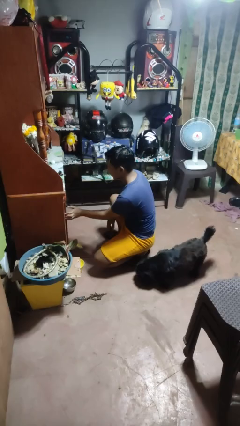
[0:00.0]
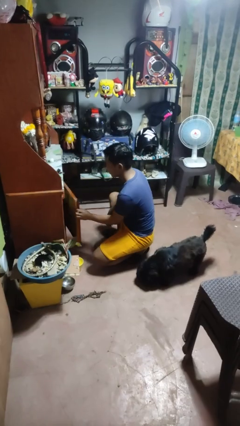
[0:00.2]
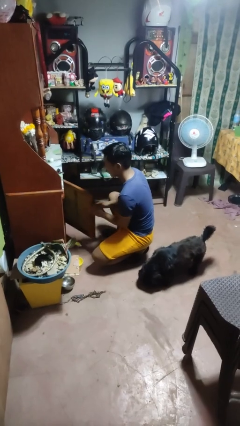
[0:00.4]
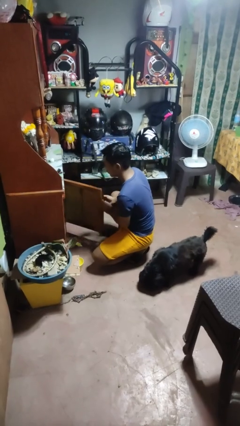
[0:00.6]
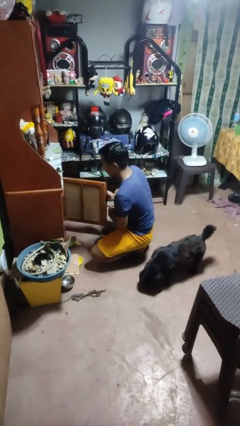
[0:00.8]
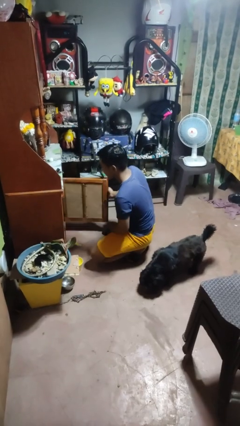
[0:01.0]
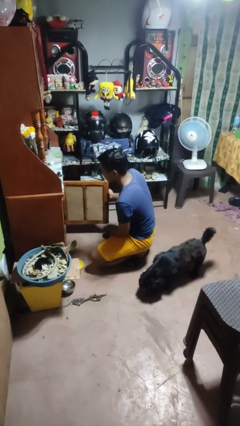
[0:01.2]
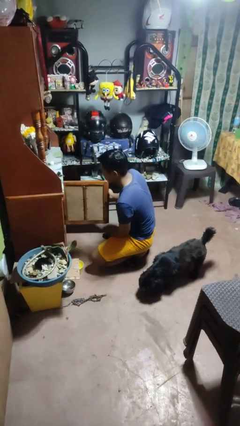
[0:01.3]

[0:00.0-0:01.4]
person opens cabinet

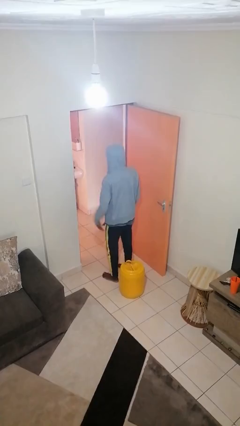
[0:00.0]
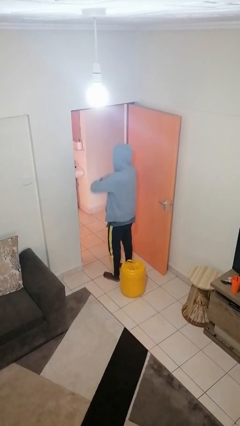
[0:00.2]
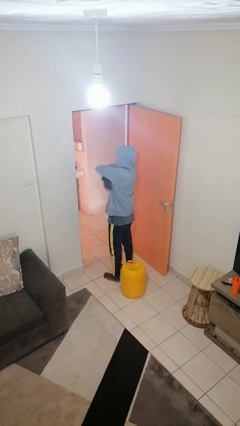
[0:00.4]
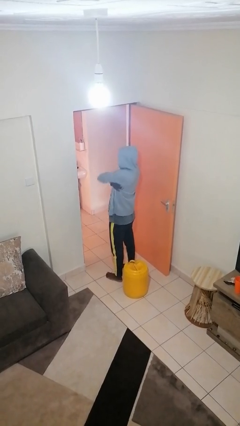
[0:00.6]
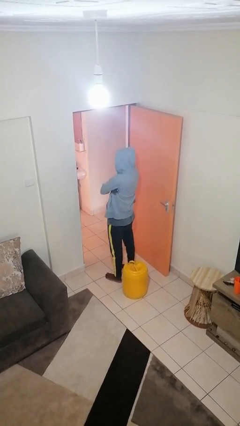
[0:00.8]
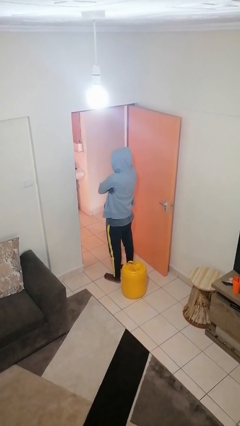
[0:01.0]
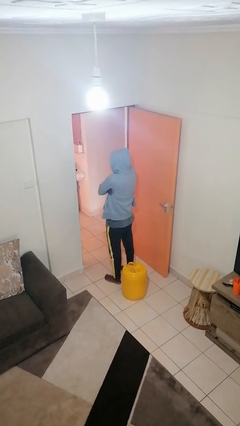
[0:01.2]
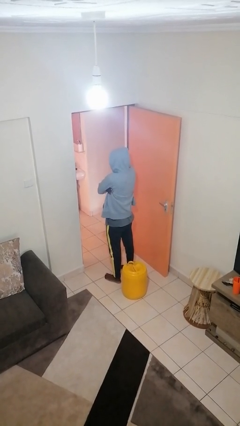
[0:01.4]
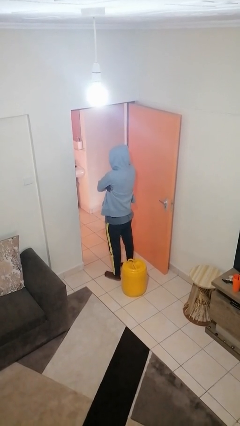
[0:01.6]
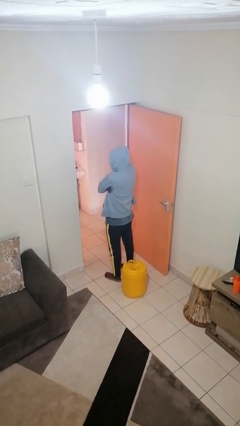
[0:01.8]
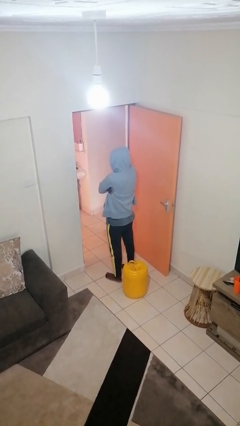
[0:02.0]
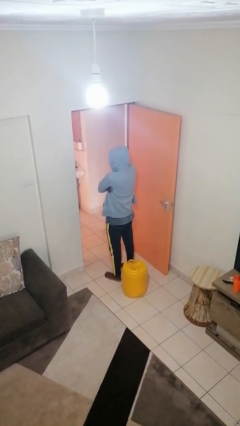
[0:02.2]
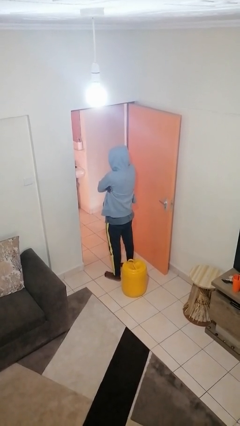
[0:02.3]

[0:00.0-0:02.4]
person crosses arms

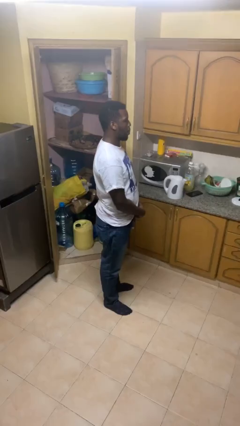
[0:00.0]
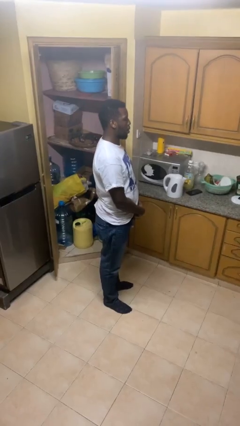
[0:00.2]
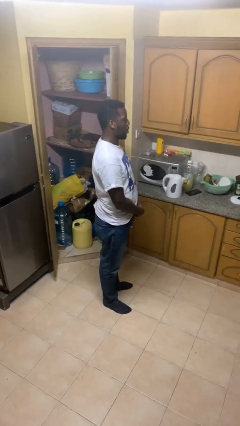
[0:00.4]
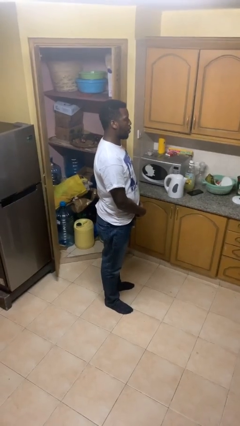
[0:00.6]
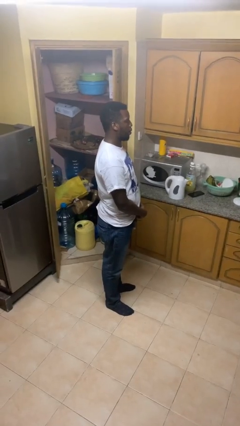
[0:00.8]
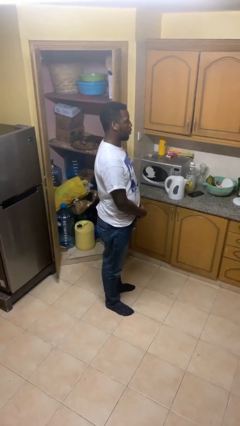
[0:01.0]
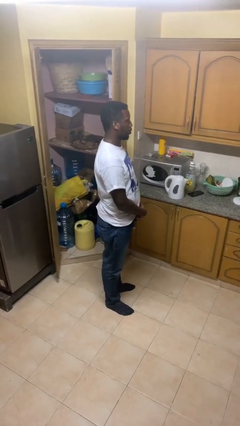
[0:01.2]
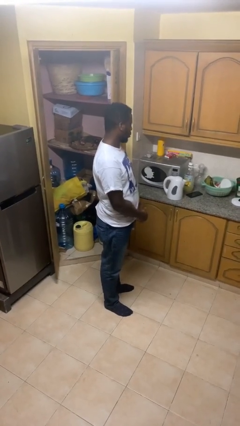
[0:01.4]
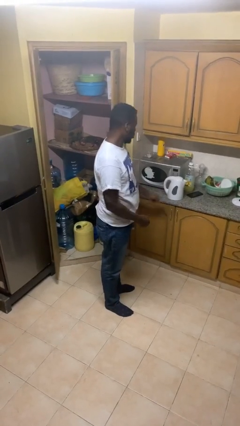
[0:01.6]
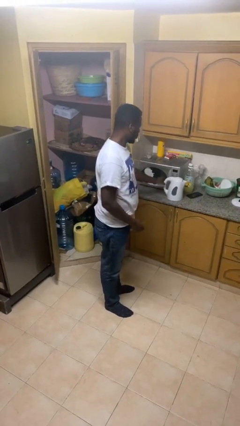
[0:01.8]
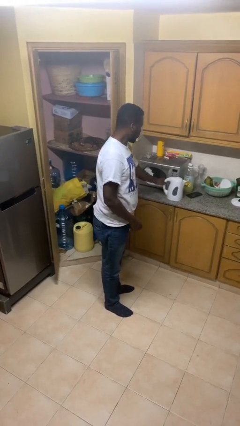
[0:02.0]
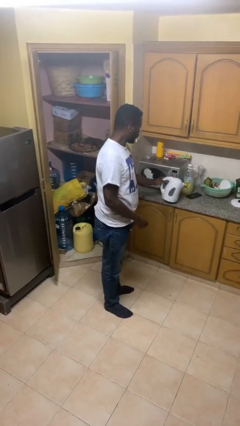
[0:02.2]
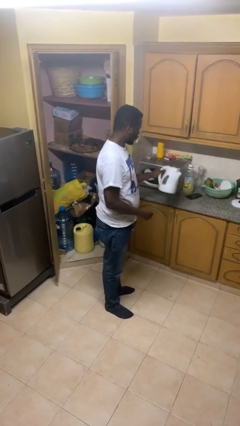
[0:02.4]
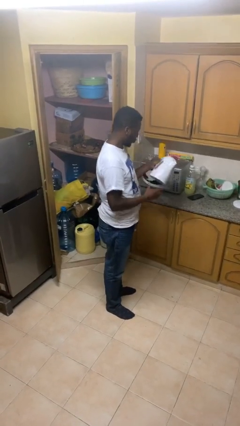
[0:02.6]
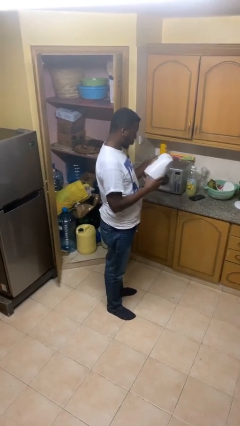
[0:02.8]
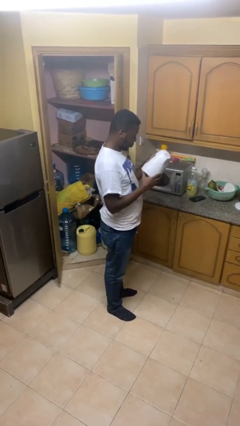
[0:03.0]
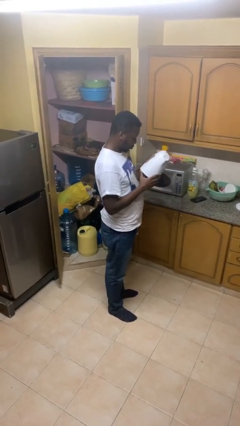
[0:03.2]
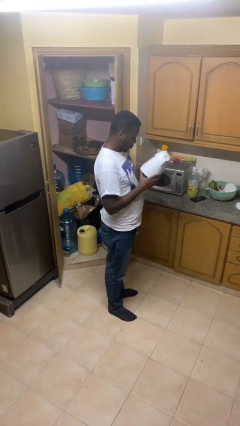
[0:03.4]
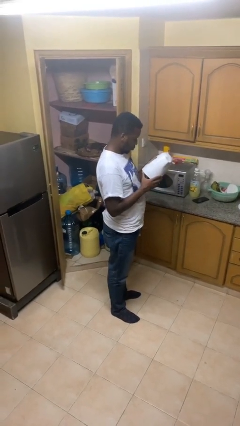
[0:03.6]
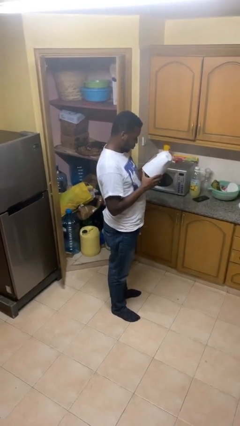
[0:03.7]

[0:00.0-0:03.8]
person picks up object from table

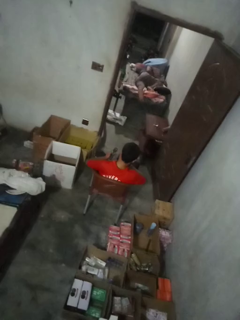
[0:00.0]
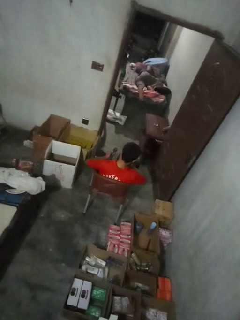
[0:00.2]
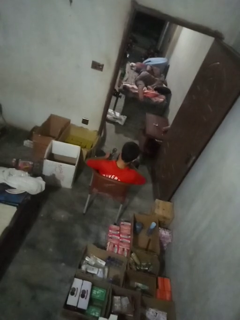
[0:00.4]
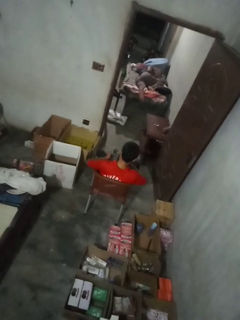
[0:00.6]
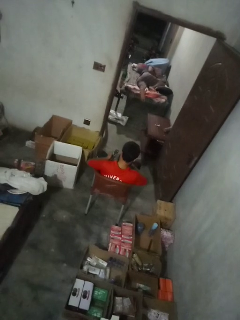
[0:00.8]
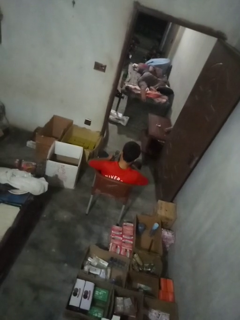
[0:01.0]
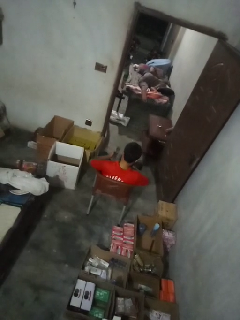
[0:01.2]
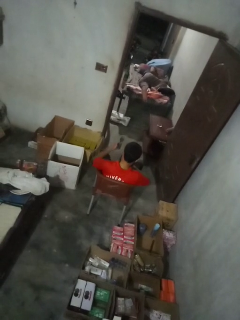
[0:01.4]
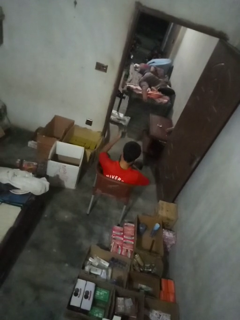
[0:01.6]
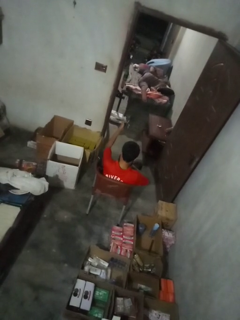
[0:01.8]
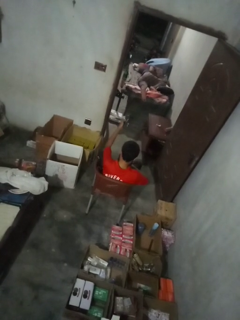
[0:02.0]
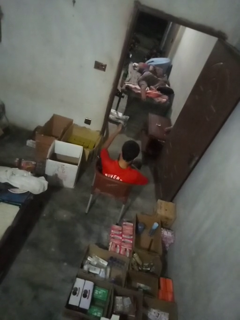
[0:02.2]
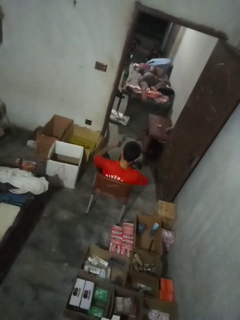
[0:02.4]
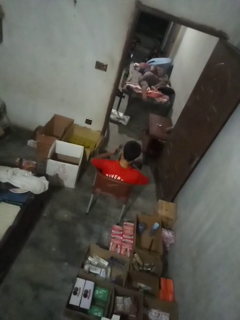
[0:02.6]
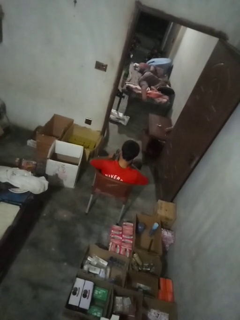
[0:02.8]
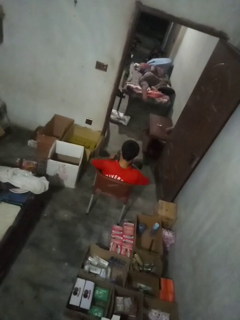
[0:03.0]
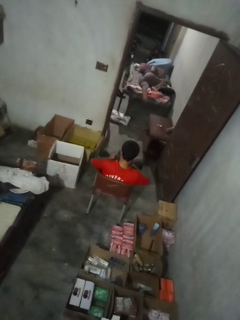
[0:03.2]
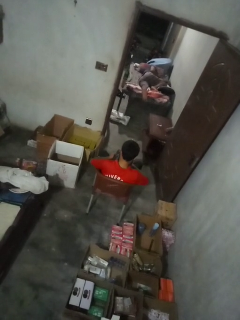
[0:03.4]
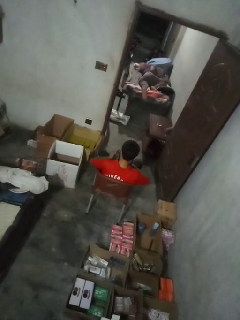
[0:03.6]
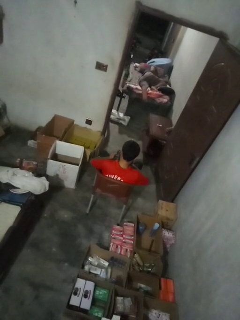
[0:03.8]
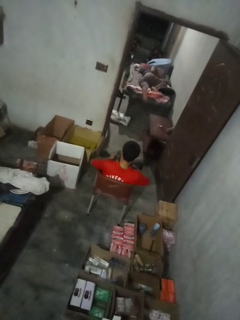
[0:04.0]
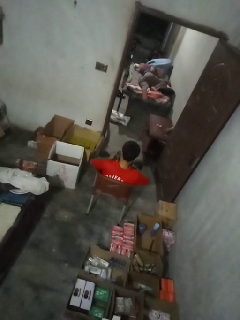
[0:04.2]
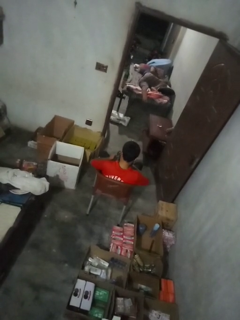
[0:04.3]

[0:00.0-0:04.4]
person uses television remote

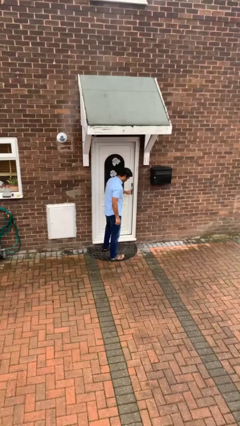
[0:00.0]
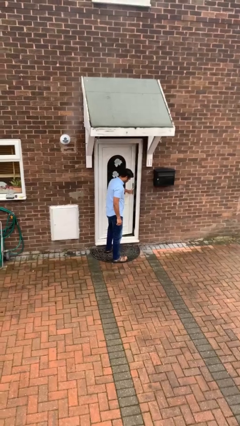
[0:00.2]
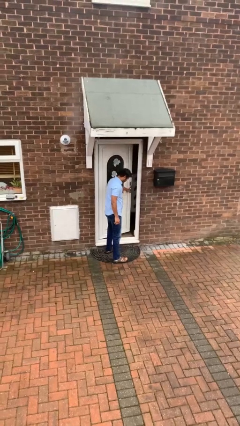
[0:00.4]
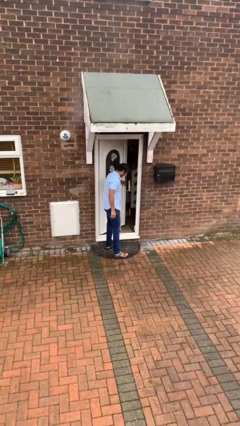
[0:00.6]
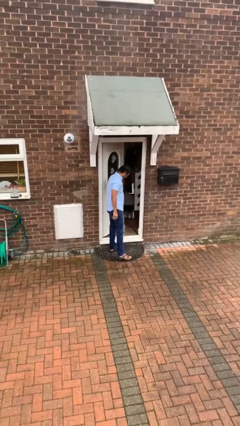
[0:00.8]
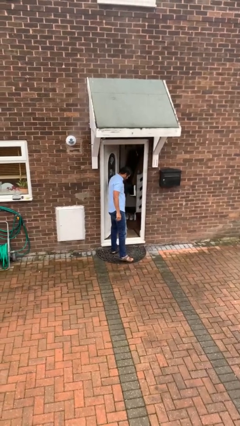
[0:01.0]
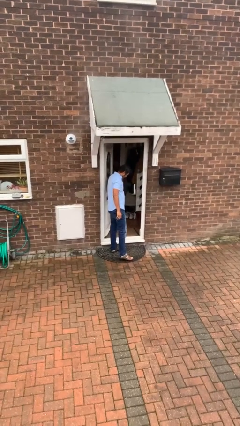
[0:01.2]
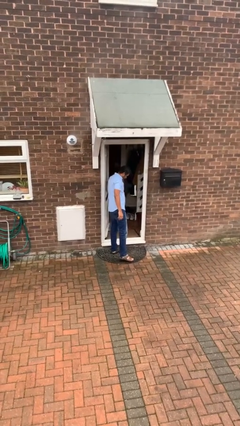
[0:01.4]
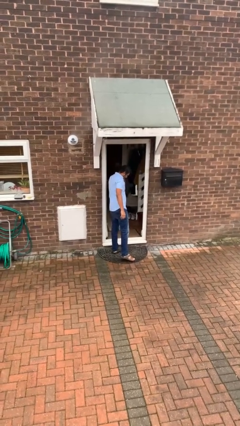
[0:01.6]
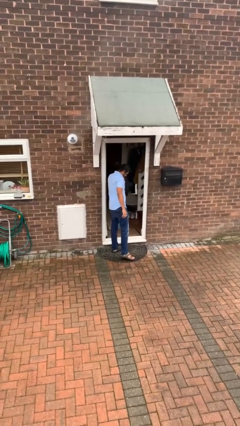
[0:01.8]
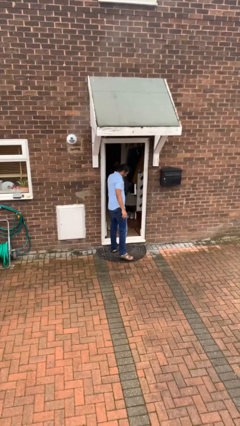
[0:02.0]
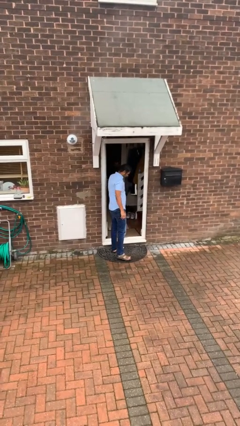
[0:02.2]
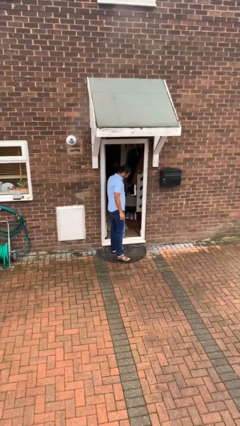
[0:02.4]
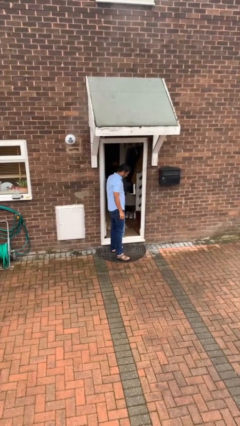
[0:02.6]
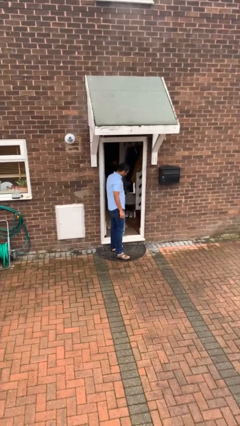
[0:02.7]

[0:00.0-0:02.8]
person opens facility door

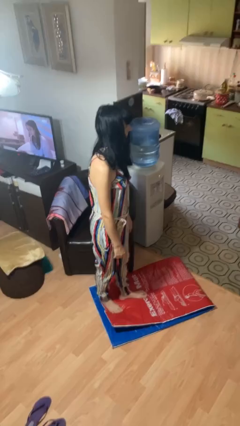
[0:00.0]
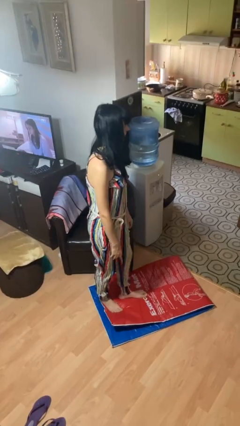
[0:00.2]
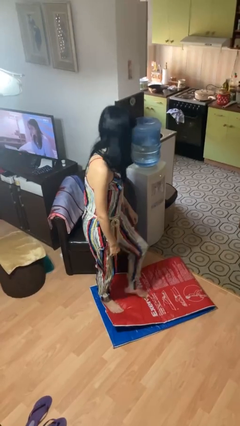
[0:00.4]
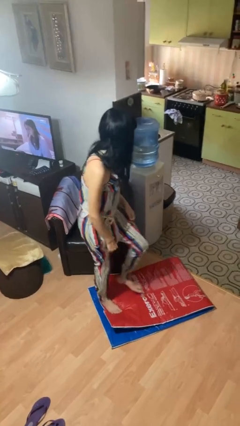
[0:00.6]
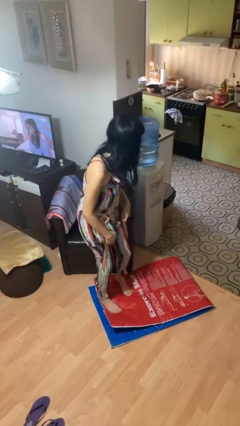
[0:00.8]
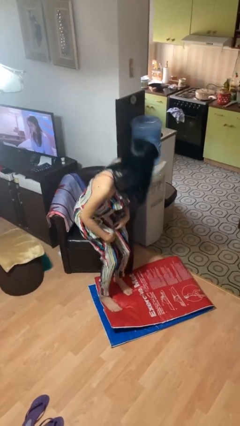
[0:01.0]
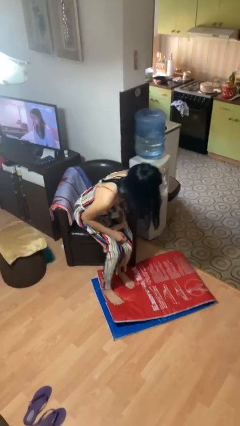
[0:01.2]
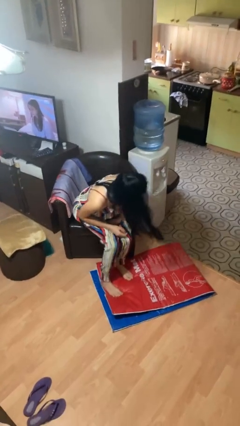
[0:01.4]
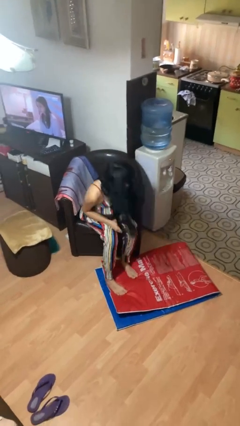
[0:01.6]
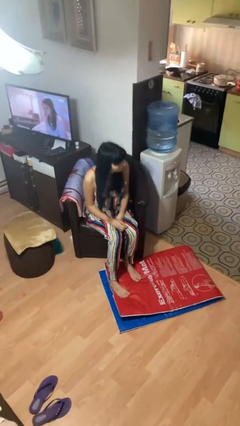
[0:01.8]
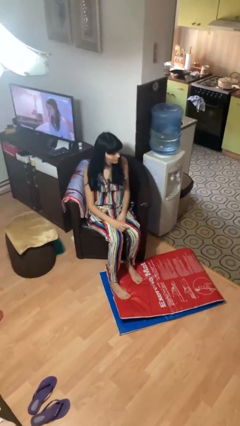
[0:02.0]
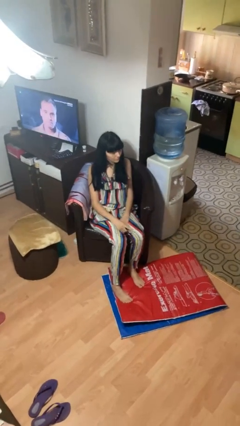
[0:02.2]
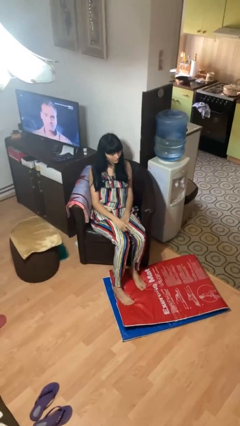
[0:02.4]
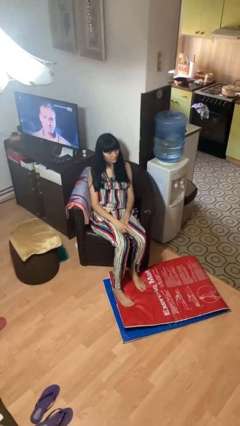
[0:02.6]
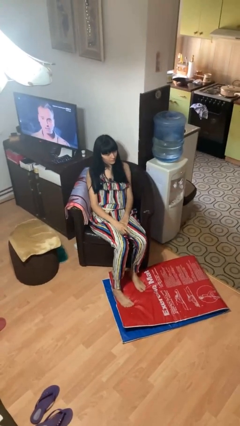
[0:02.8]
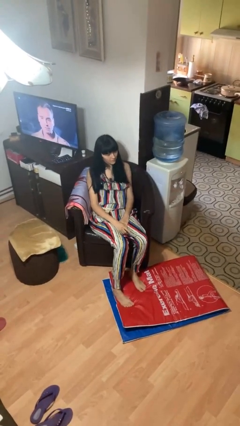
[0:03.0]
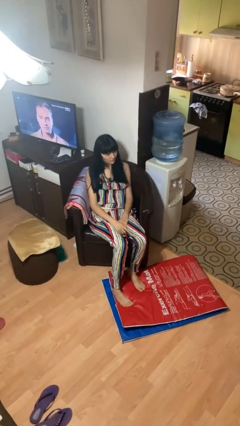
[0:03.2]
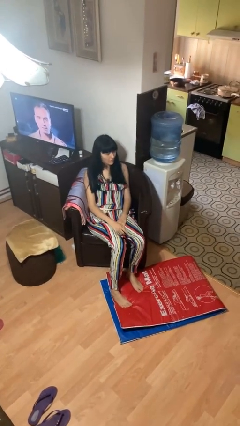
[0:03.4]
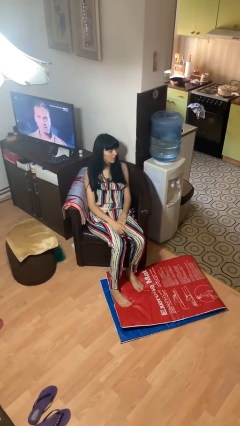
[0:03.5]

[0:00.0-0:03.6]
person sits down
